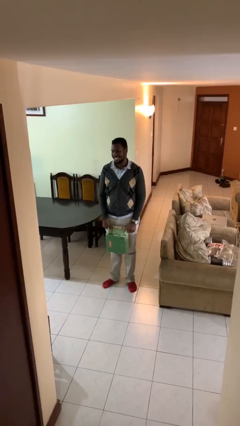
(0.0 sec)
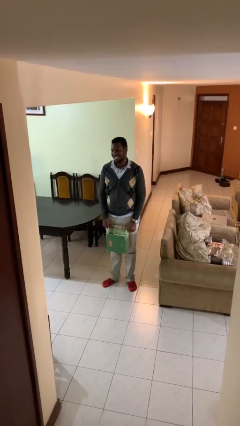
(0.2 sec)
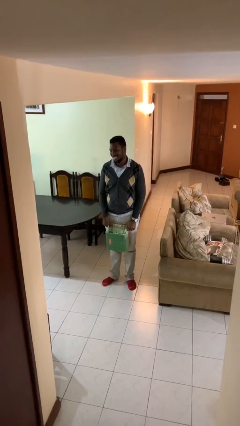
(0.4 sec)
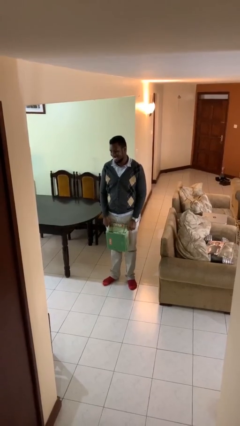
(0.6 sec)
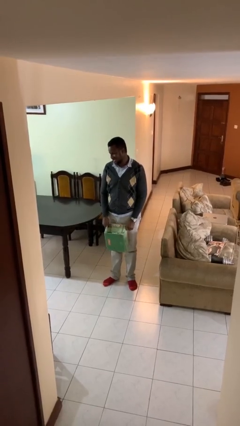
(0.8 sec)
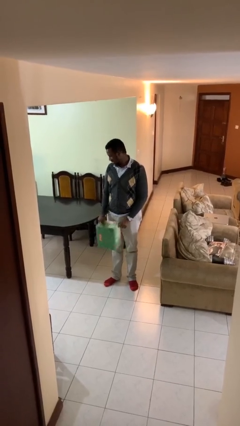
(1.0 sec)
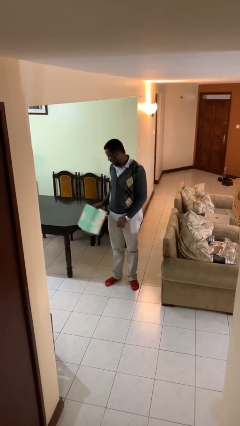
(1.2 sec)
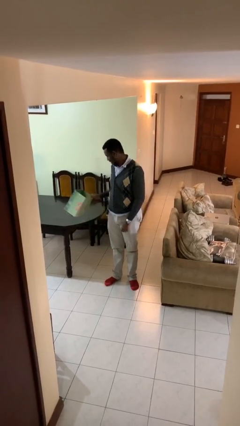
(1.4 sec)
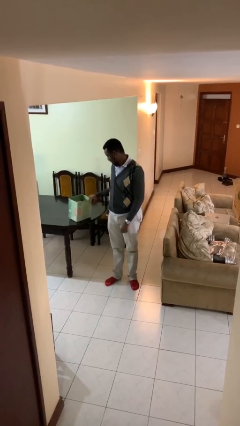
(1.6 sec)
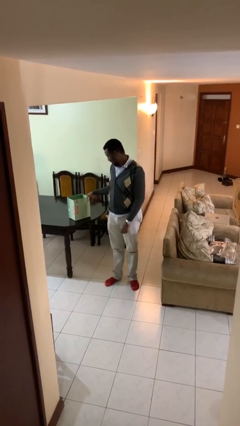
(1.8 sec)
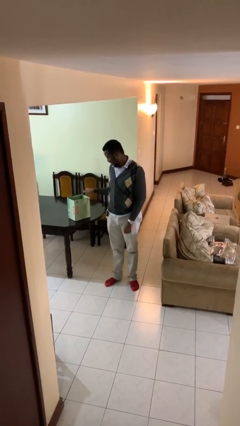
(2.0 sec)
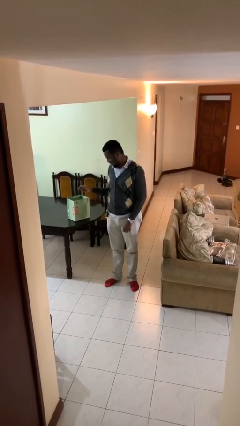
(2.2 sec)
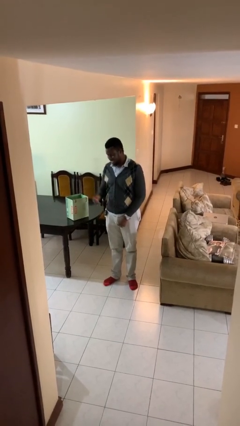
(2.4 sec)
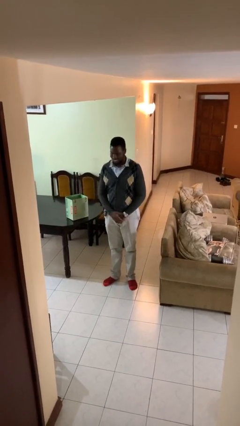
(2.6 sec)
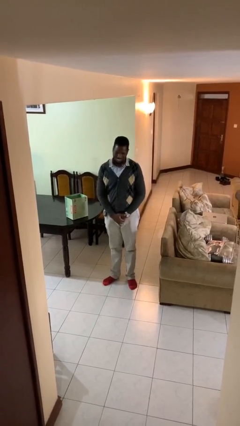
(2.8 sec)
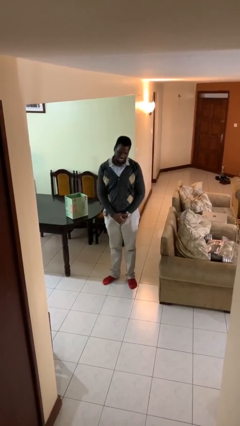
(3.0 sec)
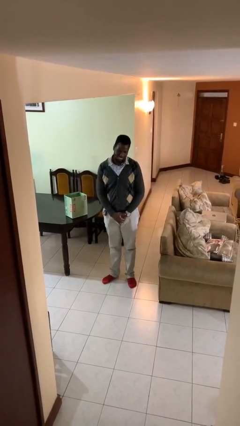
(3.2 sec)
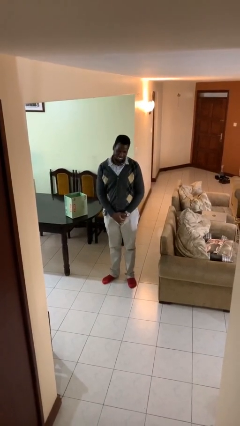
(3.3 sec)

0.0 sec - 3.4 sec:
person puts down object on table

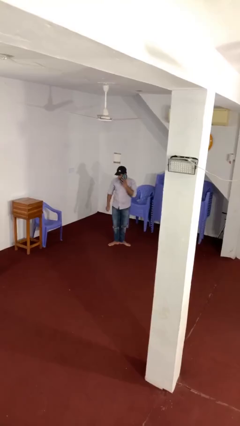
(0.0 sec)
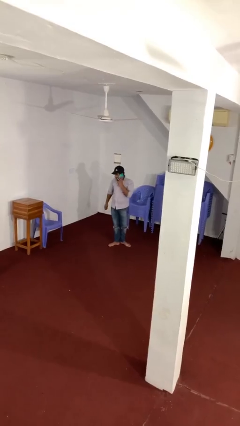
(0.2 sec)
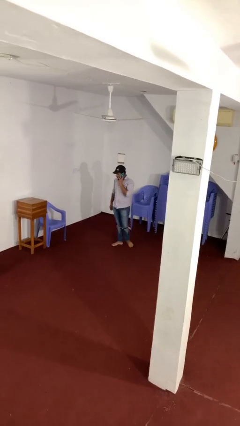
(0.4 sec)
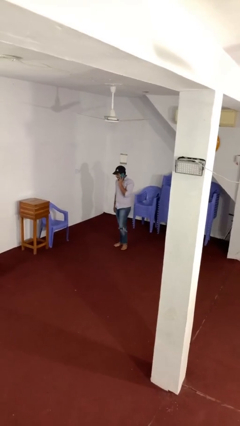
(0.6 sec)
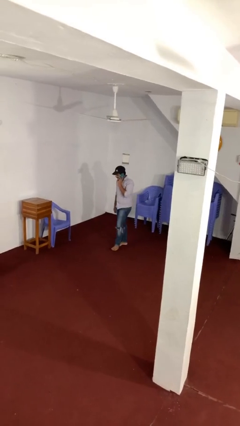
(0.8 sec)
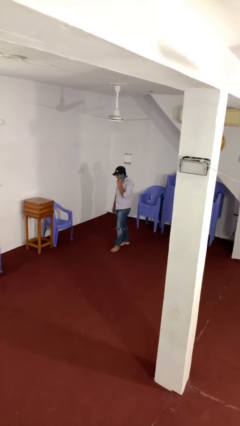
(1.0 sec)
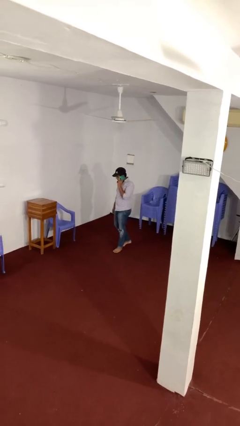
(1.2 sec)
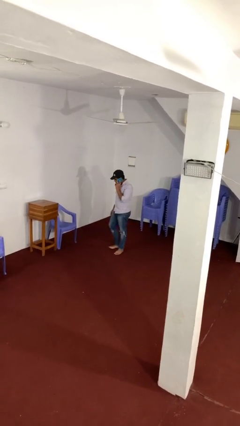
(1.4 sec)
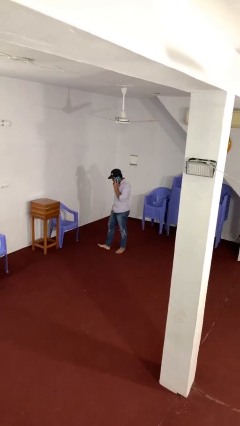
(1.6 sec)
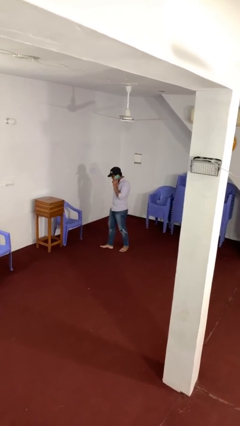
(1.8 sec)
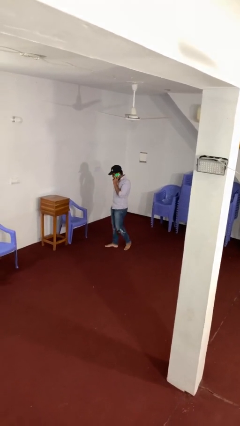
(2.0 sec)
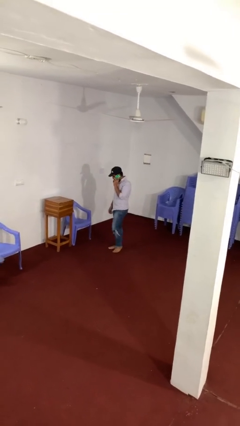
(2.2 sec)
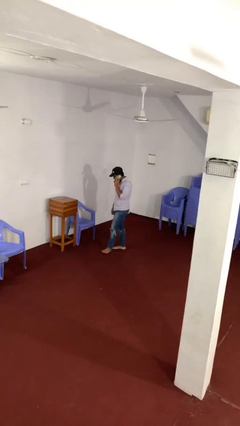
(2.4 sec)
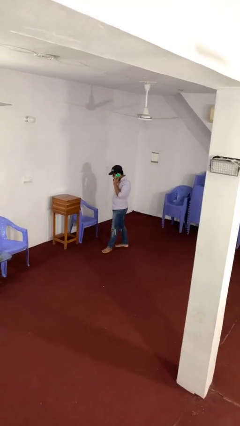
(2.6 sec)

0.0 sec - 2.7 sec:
person talks on phone

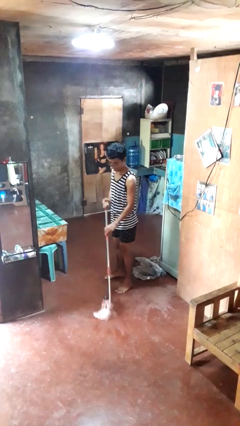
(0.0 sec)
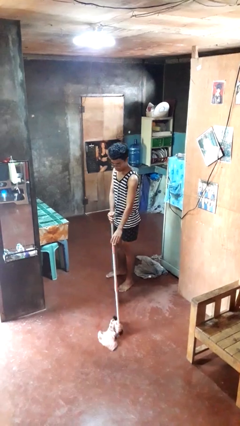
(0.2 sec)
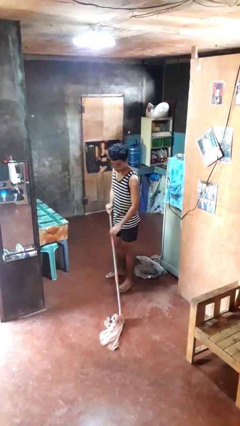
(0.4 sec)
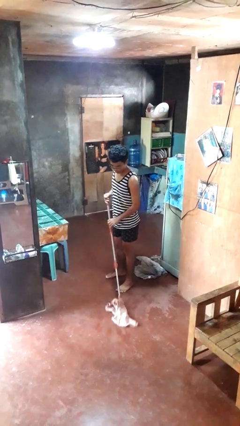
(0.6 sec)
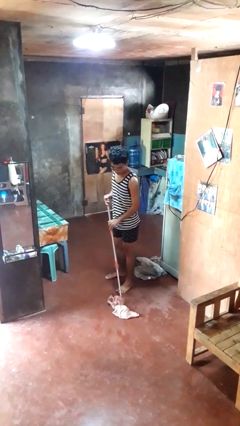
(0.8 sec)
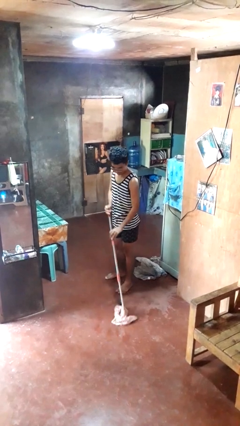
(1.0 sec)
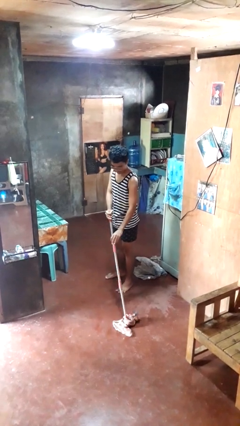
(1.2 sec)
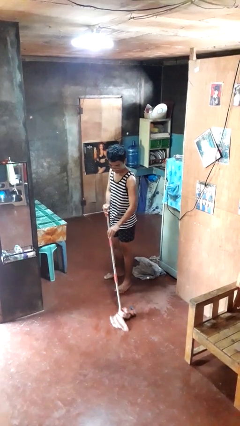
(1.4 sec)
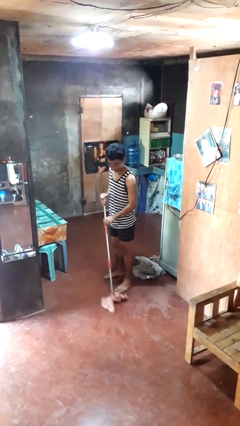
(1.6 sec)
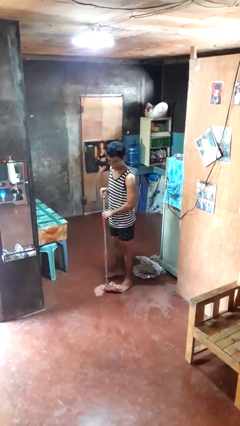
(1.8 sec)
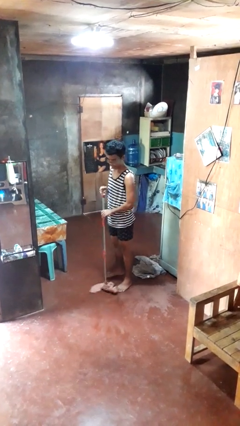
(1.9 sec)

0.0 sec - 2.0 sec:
person mops

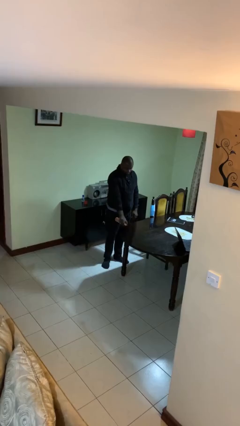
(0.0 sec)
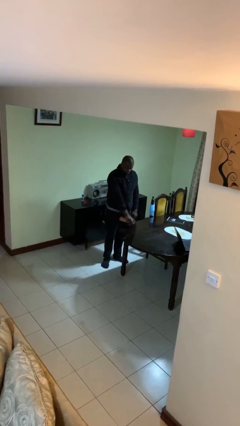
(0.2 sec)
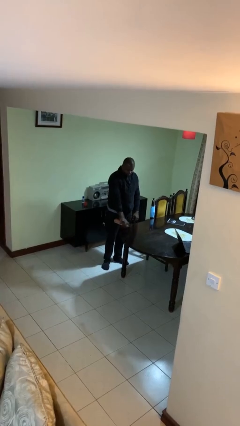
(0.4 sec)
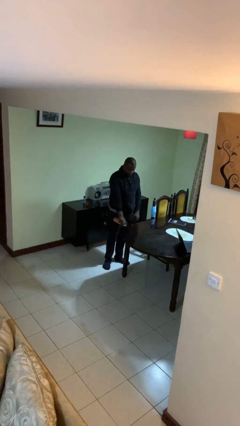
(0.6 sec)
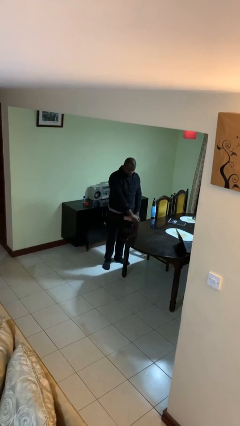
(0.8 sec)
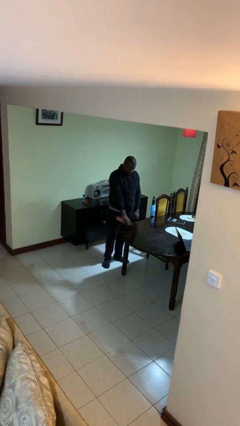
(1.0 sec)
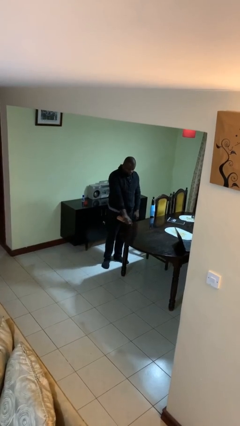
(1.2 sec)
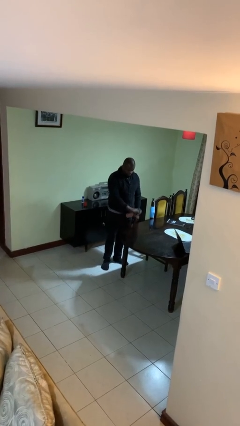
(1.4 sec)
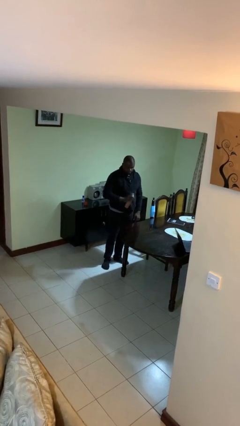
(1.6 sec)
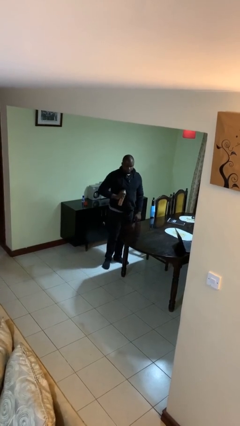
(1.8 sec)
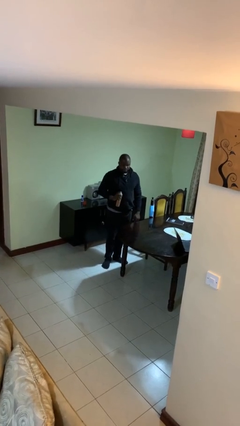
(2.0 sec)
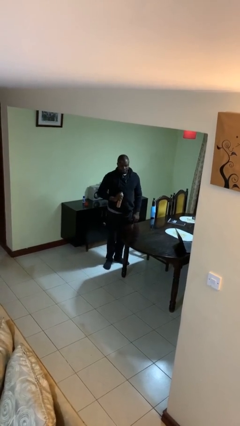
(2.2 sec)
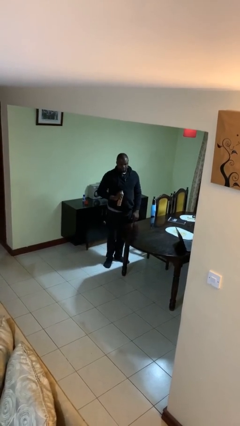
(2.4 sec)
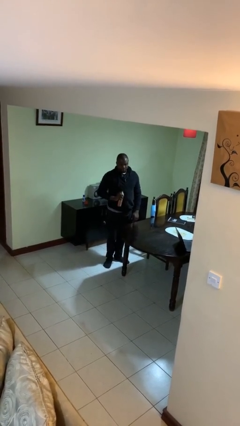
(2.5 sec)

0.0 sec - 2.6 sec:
person sprays from bottle

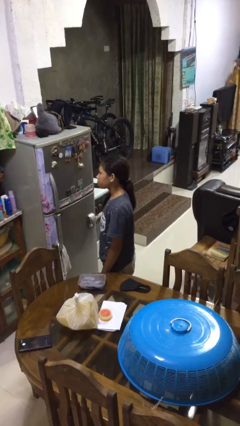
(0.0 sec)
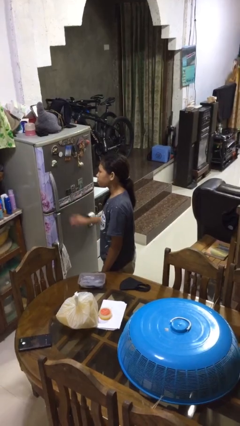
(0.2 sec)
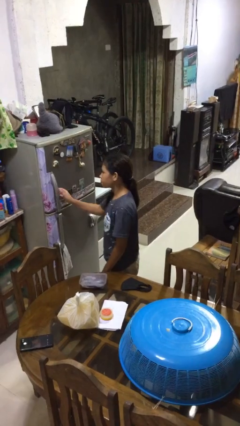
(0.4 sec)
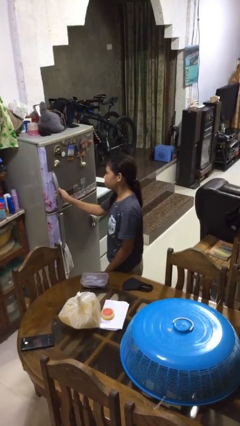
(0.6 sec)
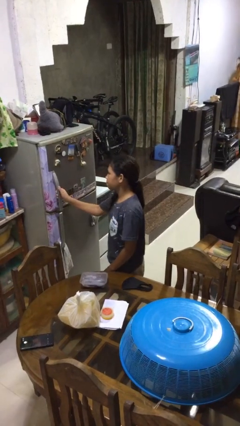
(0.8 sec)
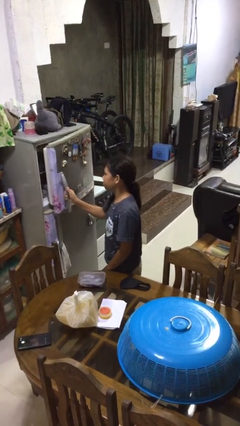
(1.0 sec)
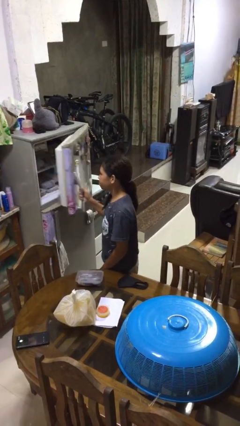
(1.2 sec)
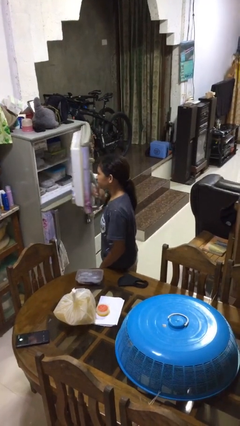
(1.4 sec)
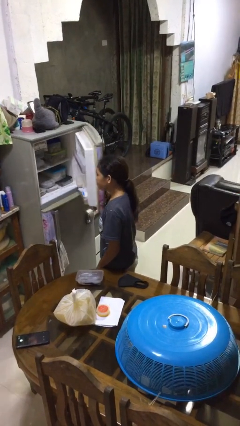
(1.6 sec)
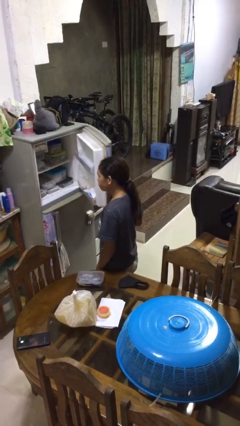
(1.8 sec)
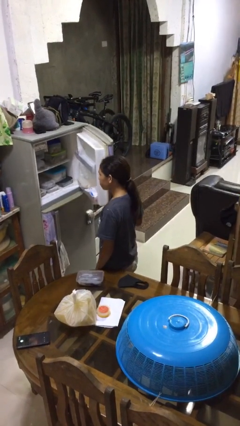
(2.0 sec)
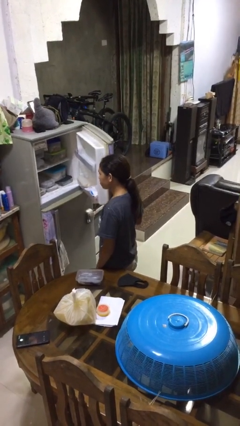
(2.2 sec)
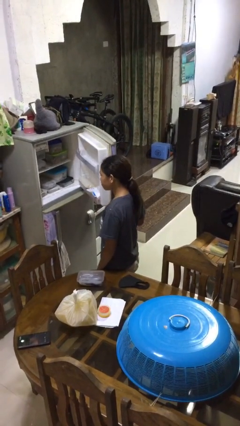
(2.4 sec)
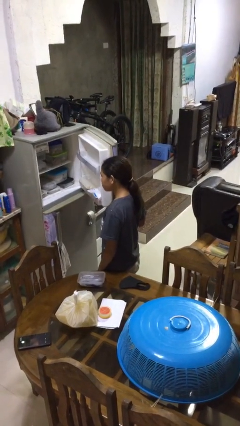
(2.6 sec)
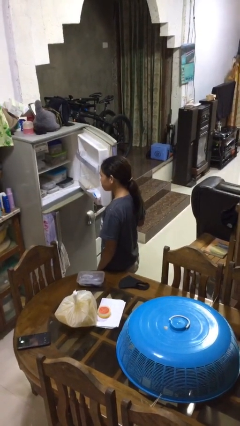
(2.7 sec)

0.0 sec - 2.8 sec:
person opens refrigerator

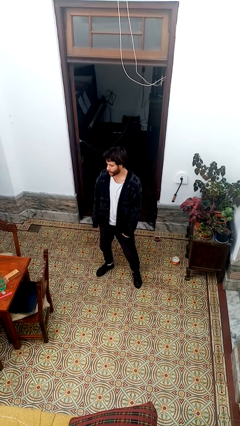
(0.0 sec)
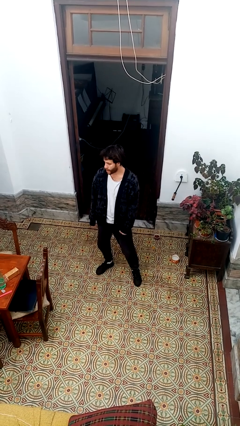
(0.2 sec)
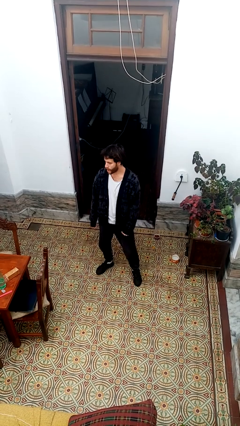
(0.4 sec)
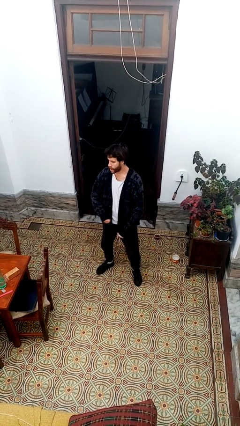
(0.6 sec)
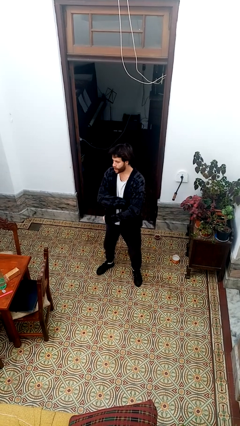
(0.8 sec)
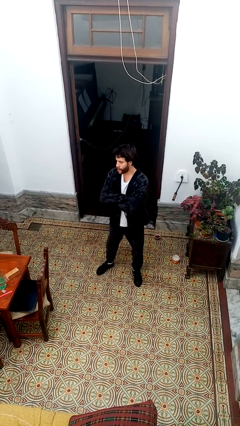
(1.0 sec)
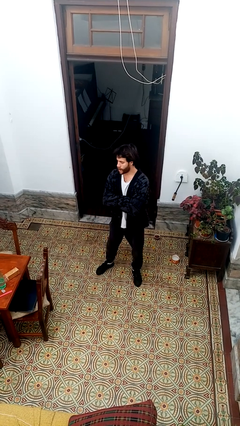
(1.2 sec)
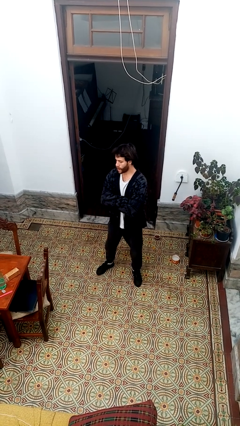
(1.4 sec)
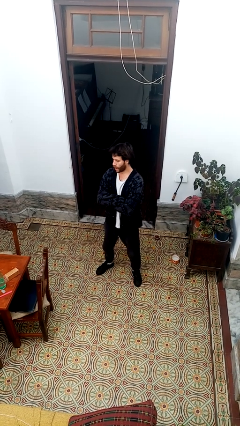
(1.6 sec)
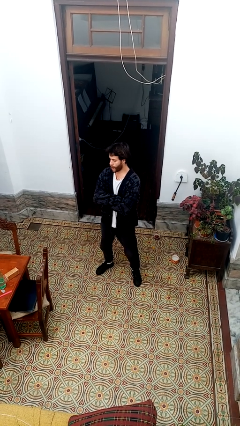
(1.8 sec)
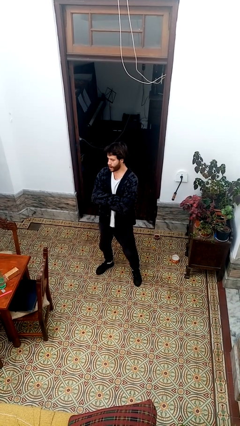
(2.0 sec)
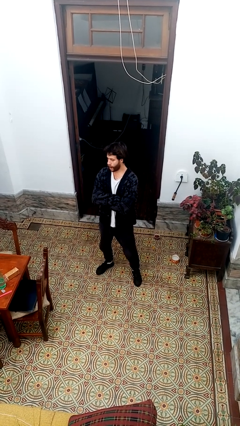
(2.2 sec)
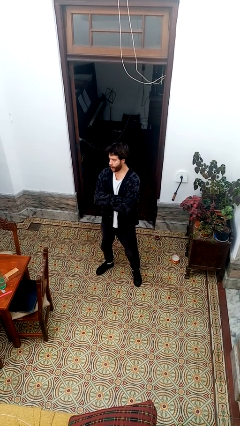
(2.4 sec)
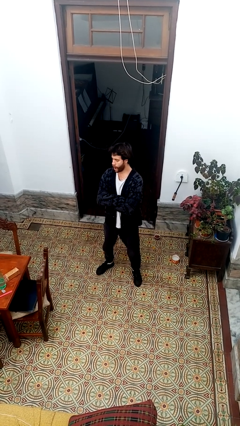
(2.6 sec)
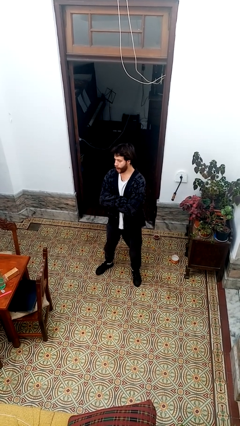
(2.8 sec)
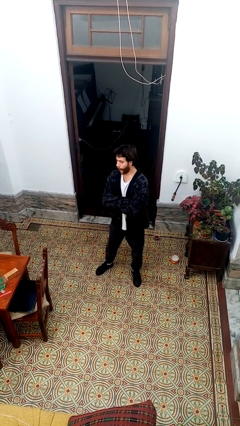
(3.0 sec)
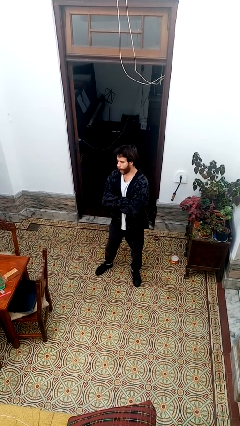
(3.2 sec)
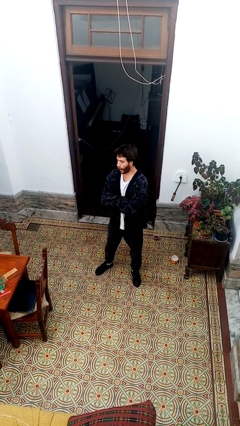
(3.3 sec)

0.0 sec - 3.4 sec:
person crosses arms

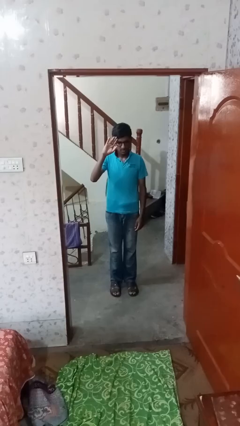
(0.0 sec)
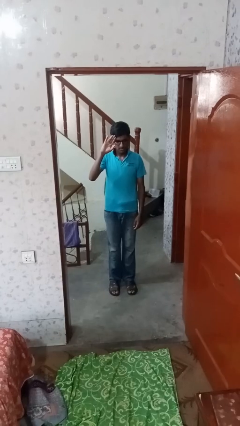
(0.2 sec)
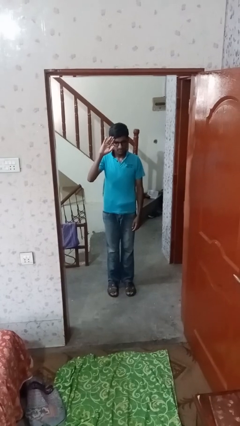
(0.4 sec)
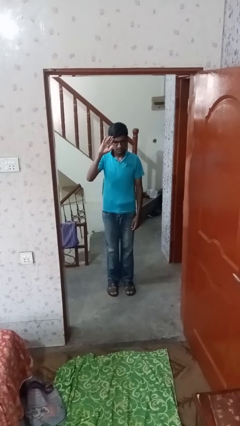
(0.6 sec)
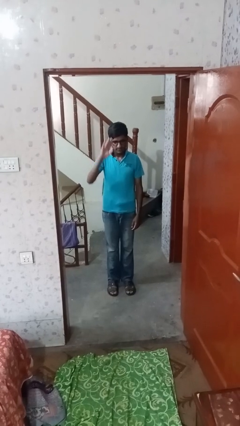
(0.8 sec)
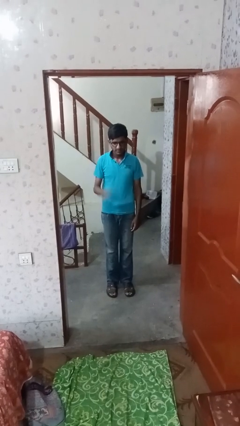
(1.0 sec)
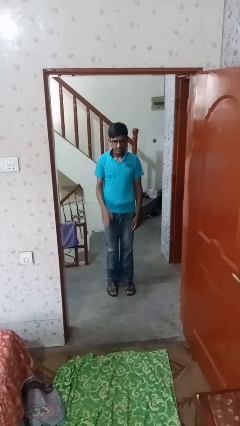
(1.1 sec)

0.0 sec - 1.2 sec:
person salutes
